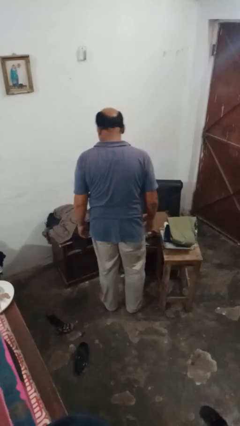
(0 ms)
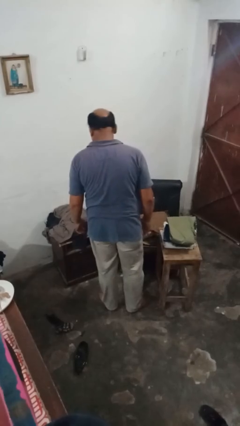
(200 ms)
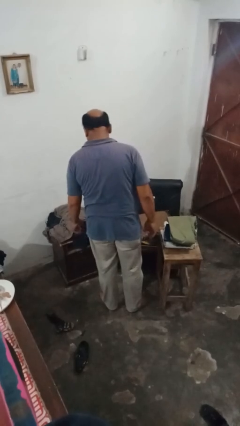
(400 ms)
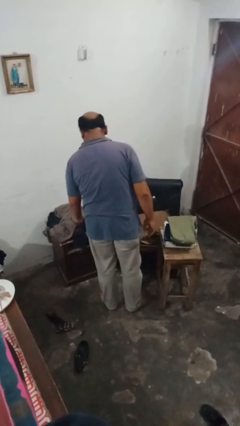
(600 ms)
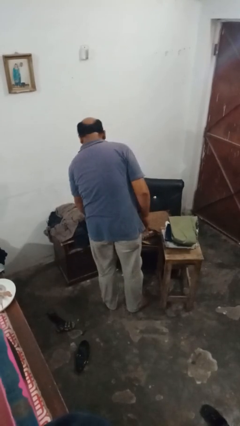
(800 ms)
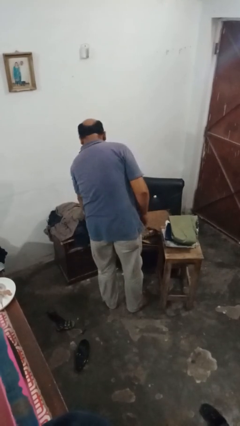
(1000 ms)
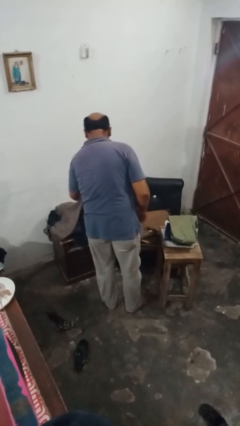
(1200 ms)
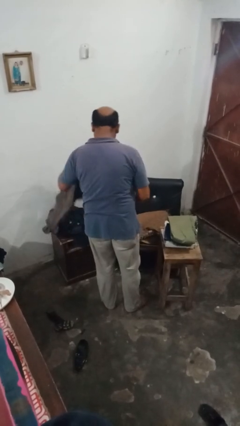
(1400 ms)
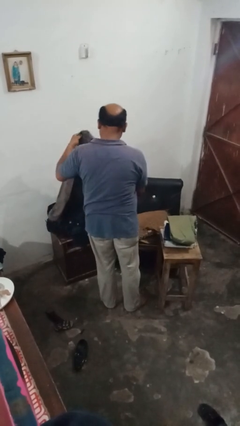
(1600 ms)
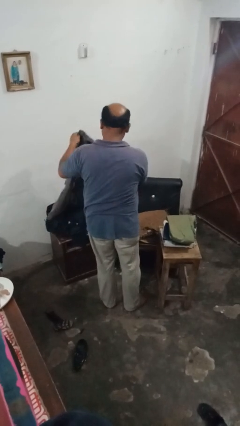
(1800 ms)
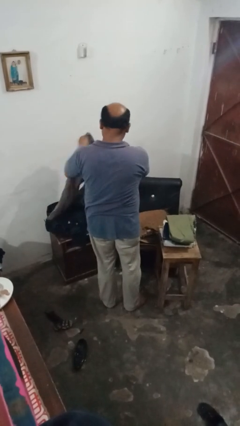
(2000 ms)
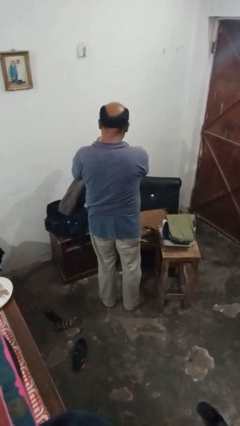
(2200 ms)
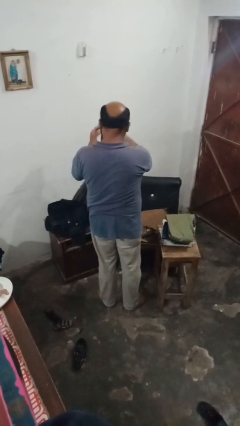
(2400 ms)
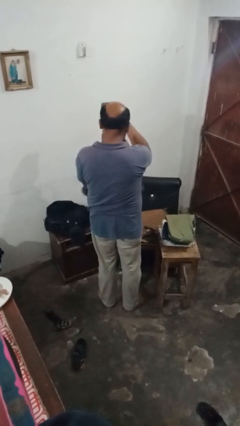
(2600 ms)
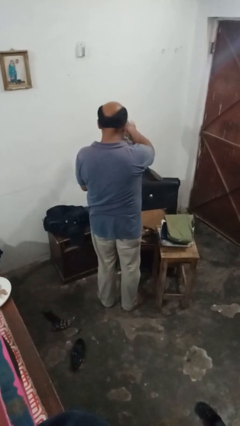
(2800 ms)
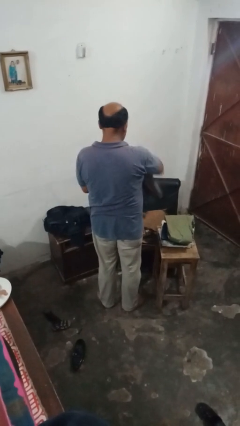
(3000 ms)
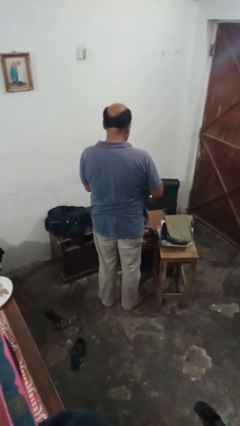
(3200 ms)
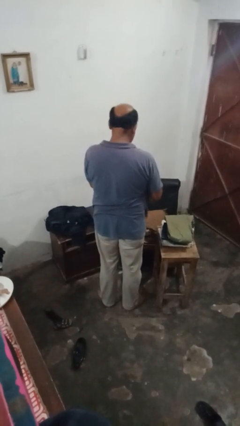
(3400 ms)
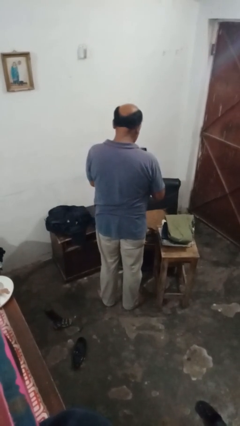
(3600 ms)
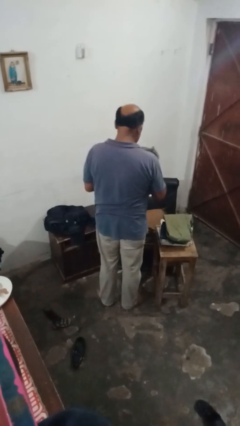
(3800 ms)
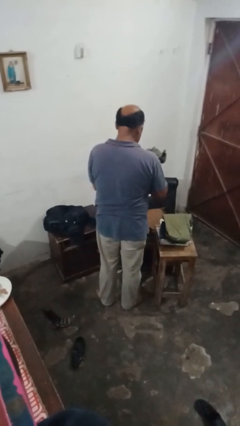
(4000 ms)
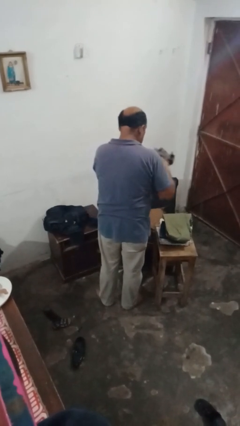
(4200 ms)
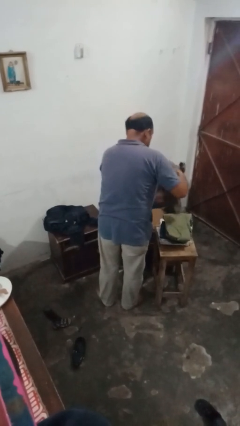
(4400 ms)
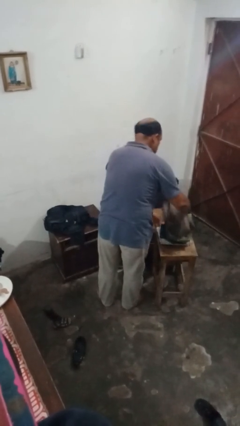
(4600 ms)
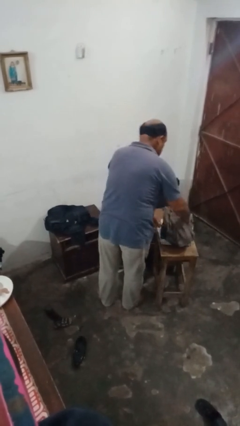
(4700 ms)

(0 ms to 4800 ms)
person folds pants

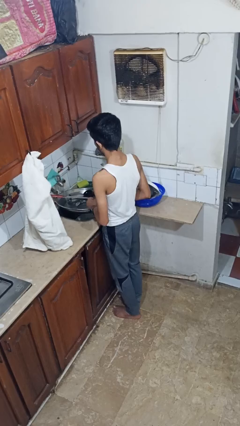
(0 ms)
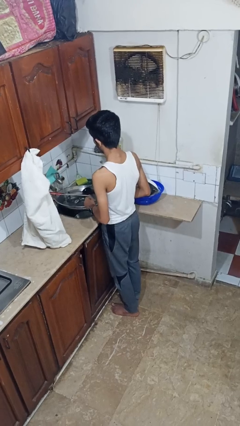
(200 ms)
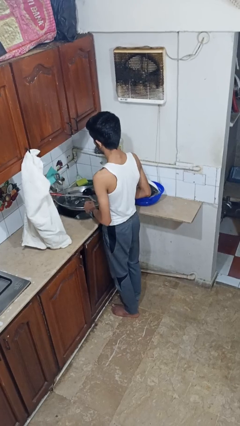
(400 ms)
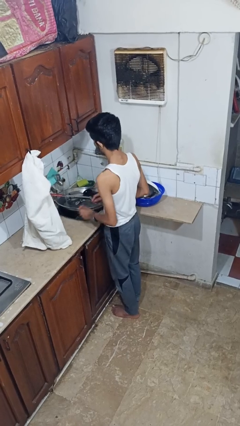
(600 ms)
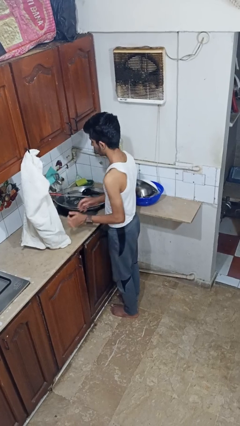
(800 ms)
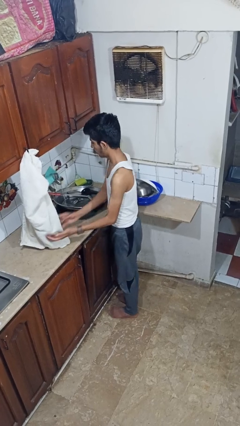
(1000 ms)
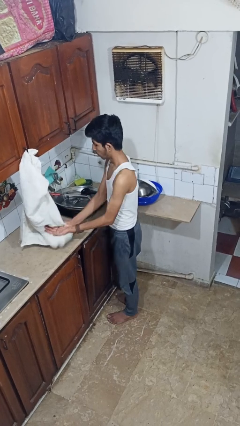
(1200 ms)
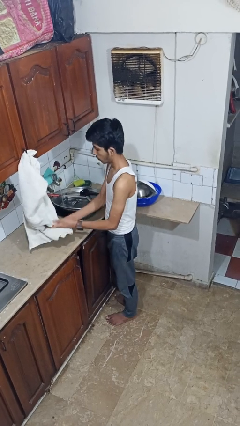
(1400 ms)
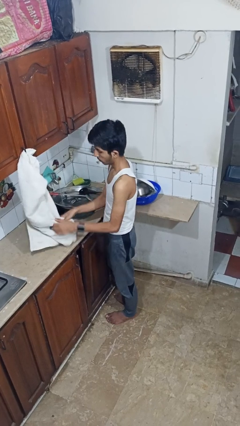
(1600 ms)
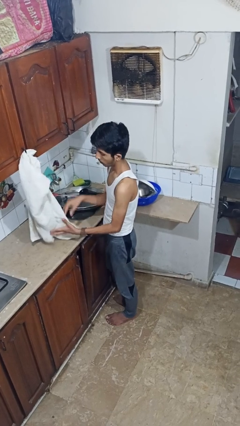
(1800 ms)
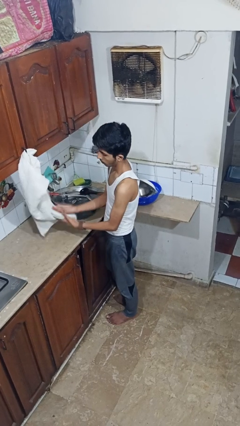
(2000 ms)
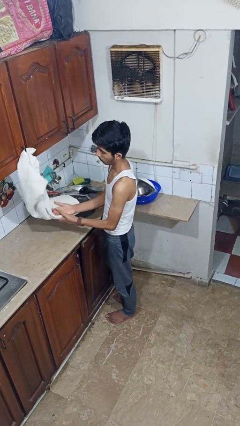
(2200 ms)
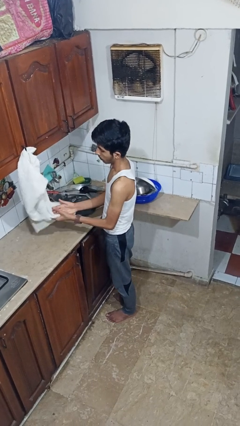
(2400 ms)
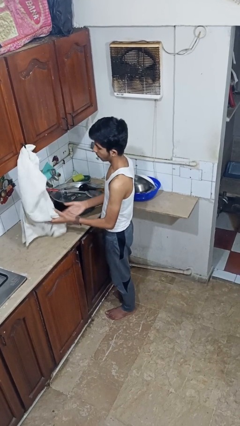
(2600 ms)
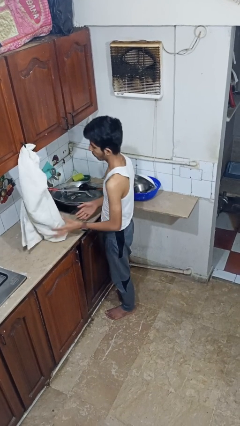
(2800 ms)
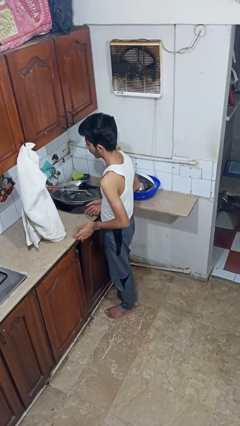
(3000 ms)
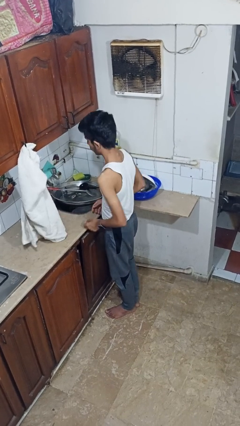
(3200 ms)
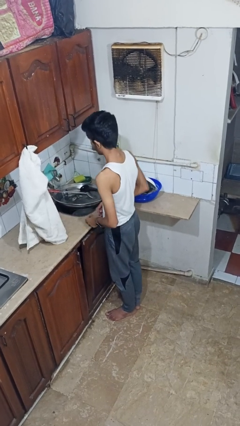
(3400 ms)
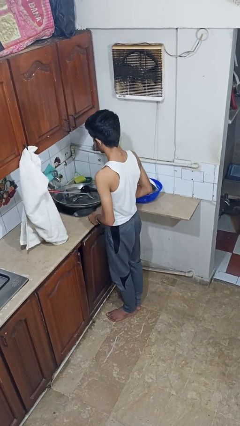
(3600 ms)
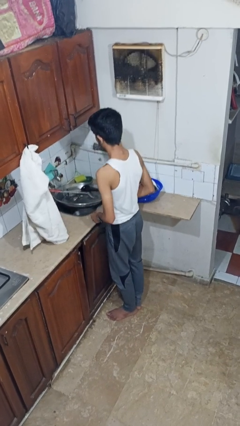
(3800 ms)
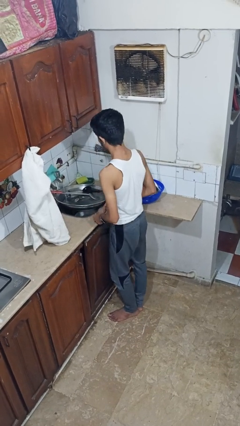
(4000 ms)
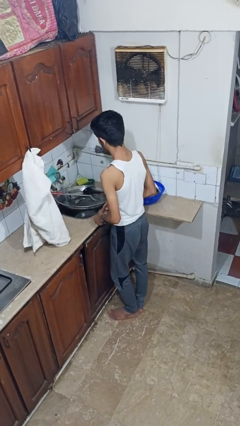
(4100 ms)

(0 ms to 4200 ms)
person dries hands with towel

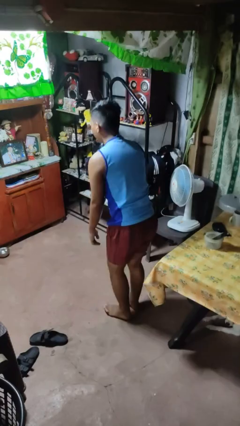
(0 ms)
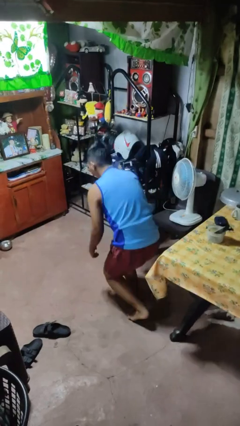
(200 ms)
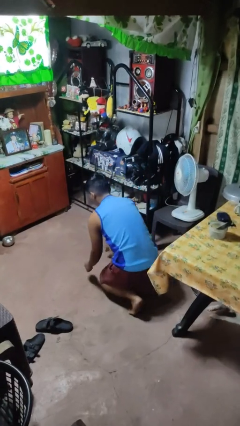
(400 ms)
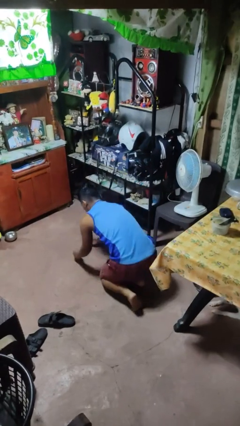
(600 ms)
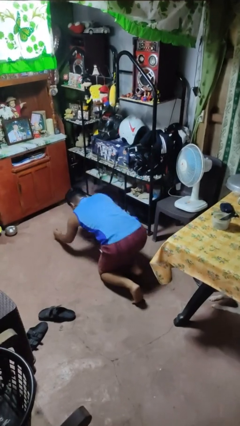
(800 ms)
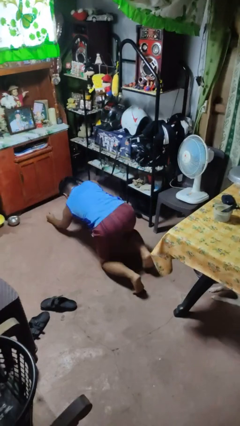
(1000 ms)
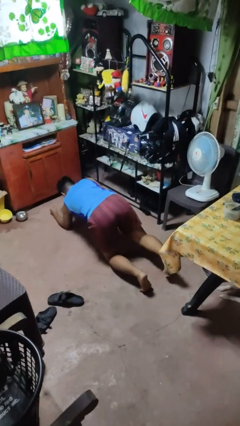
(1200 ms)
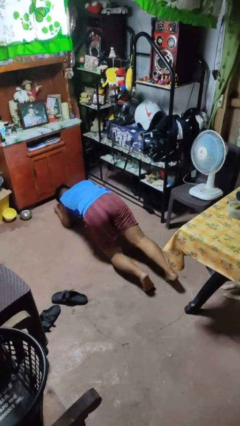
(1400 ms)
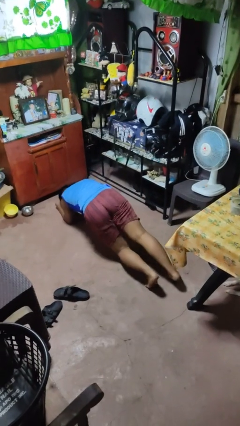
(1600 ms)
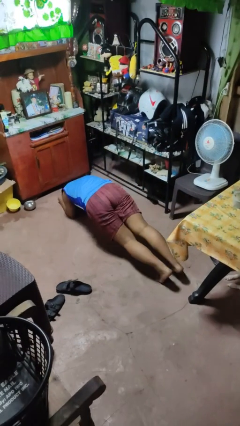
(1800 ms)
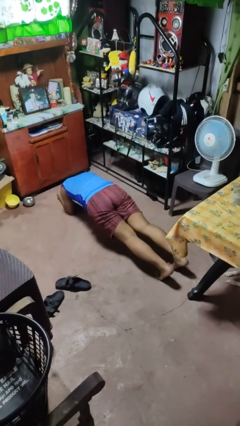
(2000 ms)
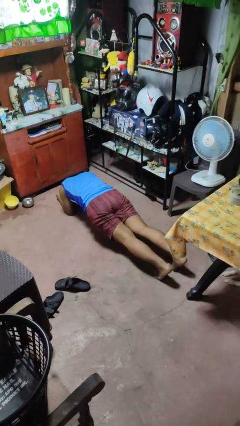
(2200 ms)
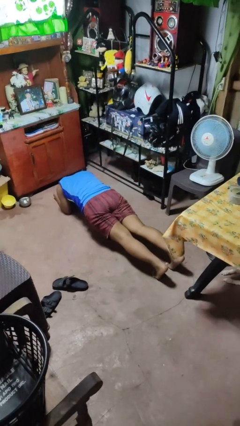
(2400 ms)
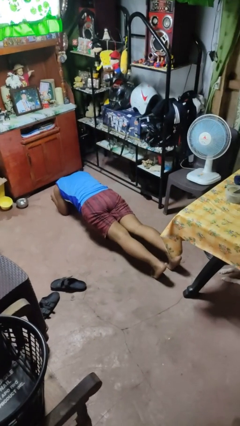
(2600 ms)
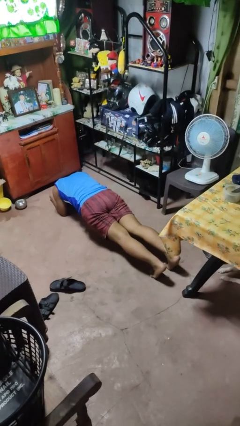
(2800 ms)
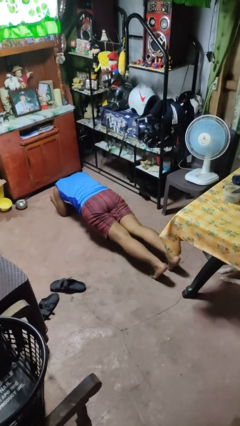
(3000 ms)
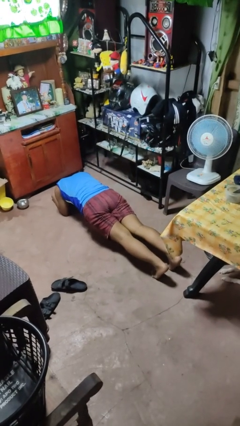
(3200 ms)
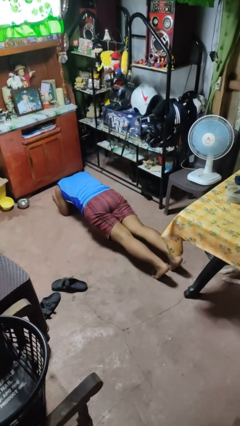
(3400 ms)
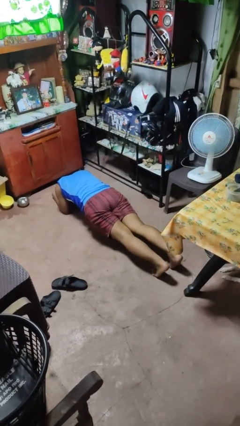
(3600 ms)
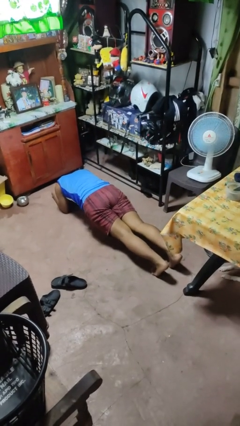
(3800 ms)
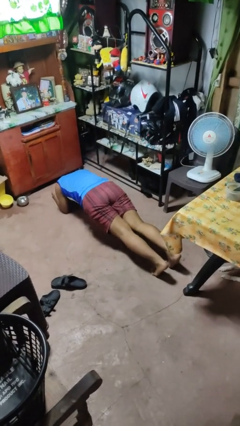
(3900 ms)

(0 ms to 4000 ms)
person exercises with plank

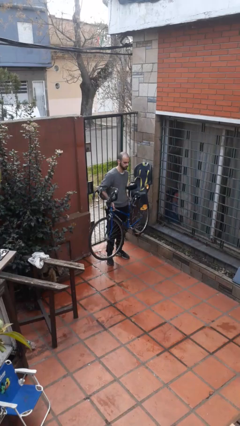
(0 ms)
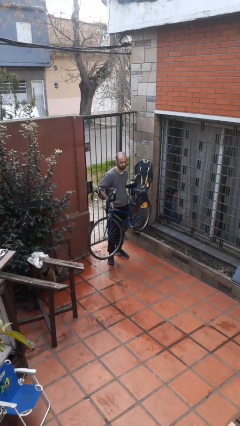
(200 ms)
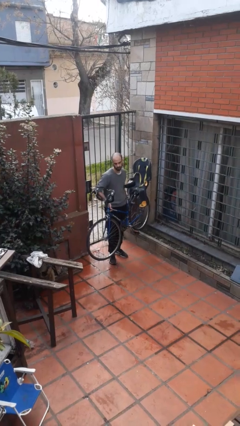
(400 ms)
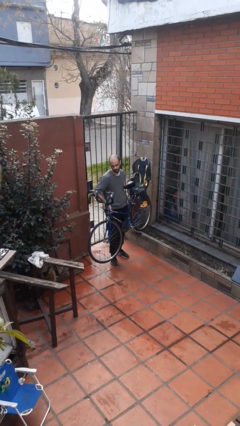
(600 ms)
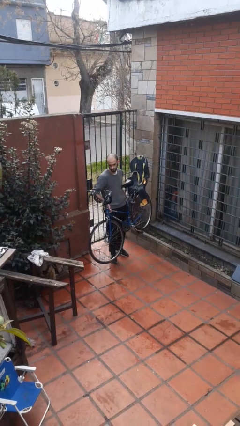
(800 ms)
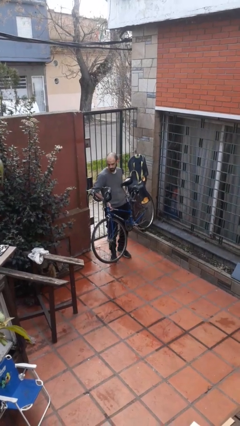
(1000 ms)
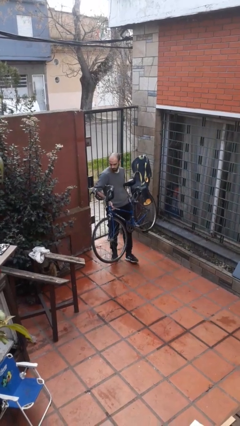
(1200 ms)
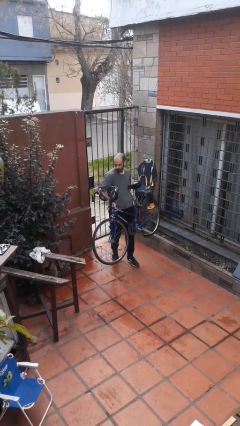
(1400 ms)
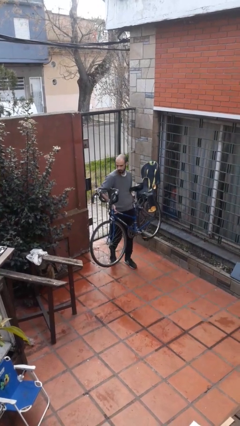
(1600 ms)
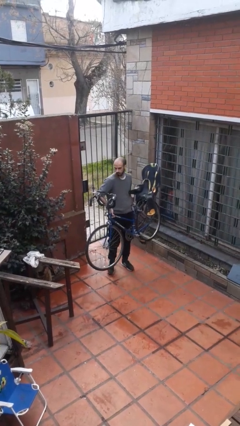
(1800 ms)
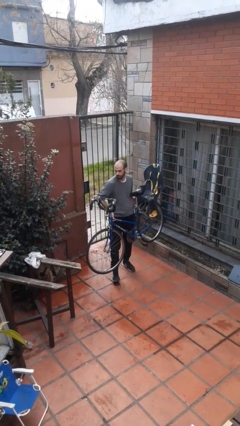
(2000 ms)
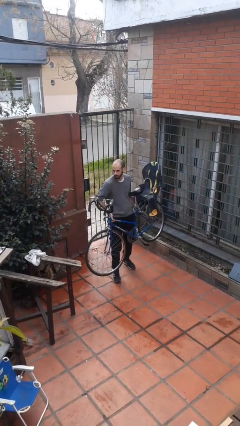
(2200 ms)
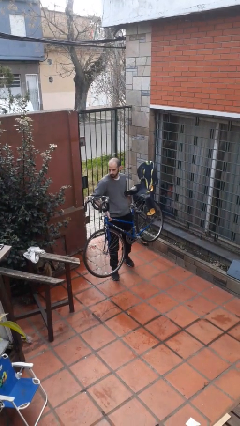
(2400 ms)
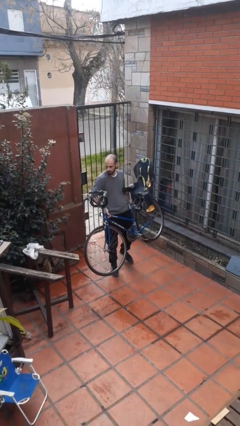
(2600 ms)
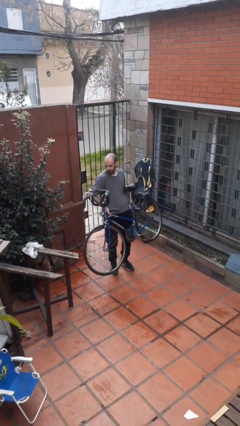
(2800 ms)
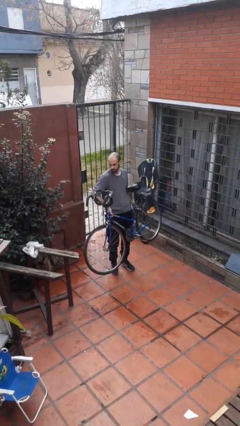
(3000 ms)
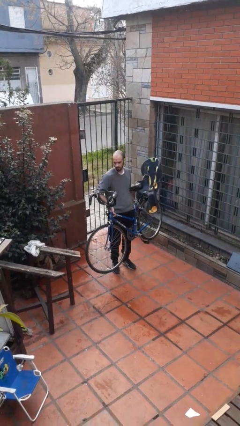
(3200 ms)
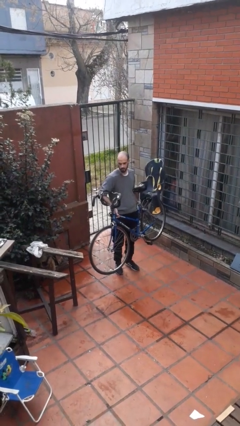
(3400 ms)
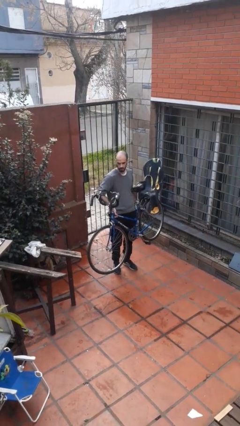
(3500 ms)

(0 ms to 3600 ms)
person carries bicycle

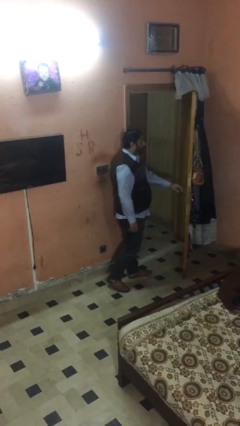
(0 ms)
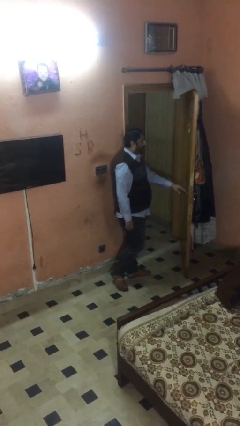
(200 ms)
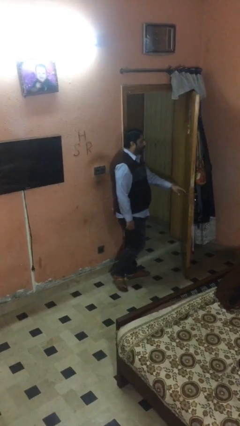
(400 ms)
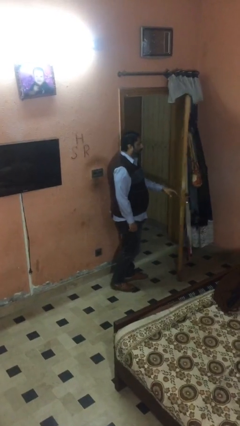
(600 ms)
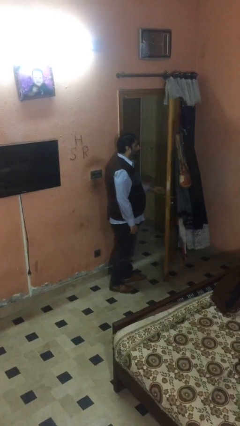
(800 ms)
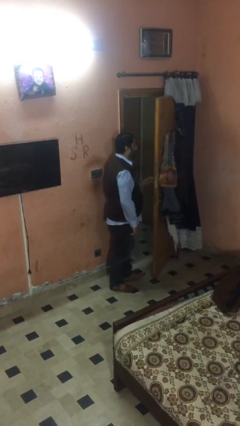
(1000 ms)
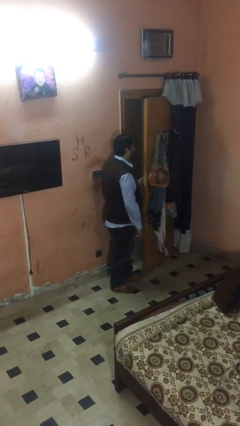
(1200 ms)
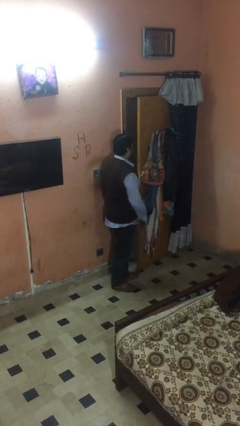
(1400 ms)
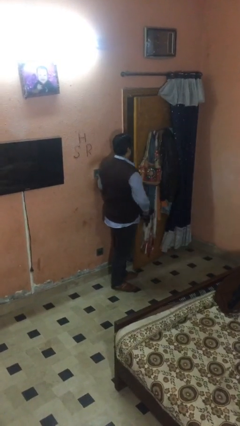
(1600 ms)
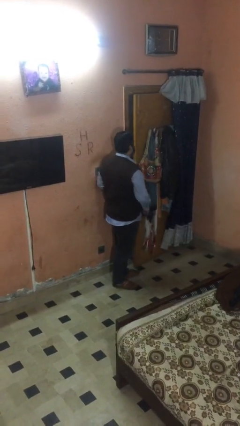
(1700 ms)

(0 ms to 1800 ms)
person closes facility door
